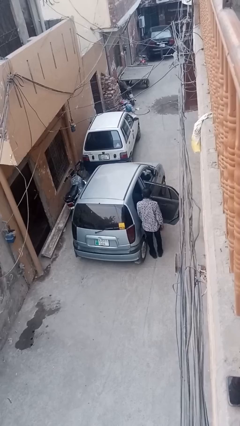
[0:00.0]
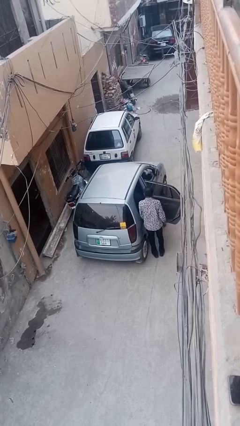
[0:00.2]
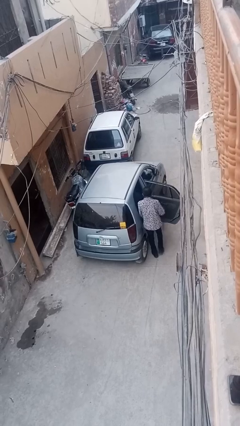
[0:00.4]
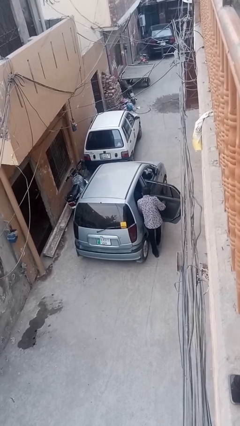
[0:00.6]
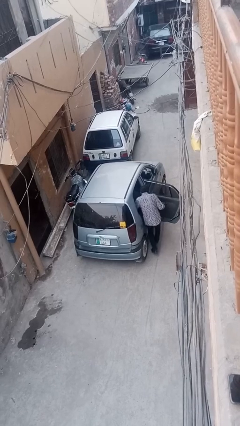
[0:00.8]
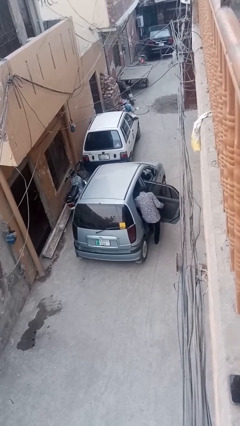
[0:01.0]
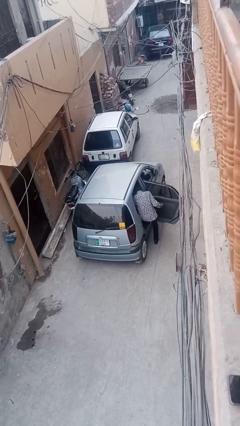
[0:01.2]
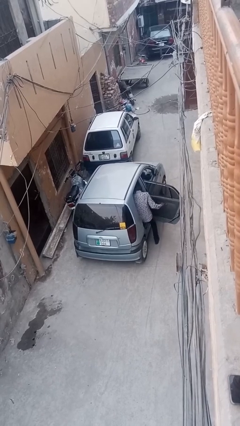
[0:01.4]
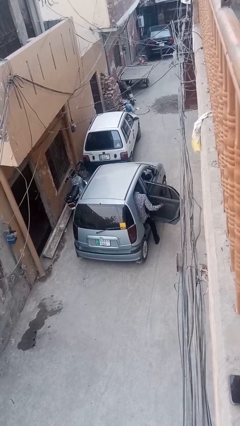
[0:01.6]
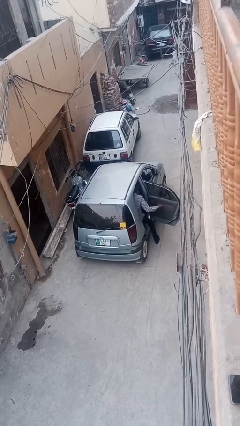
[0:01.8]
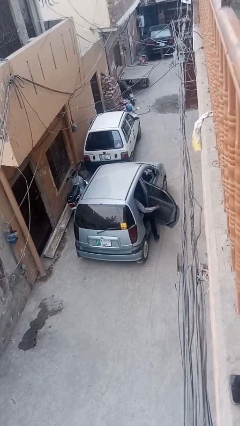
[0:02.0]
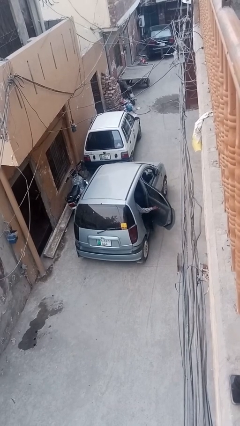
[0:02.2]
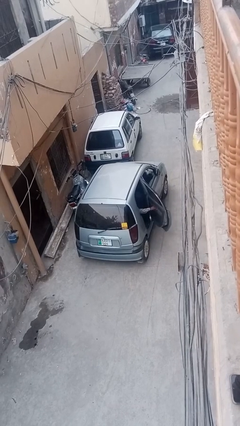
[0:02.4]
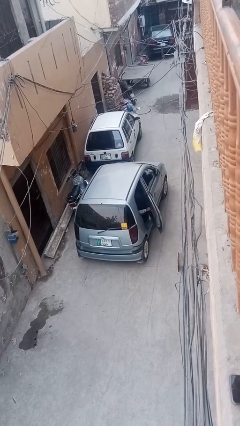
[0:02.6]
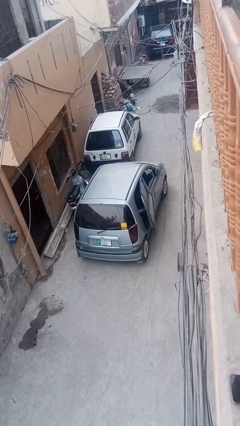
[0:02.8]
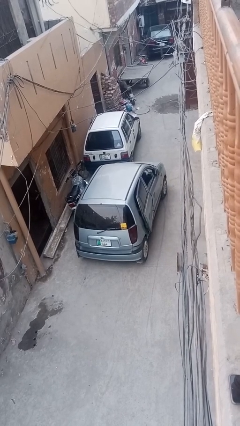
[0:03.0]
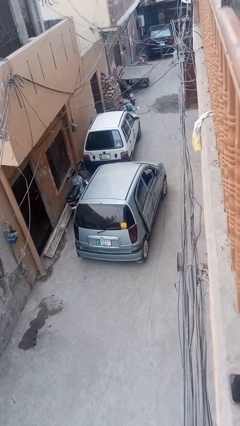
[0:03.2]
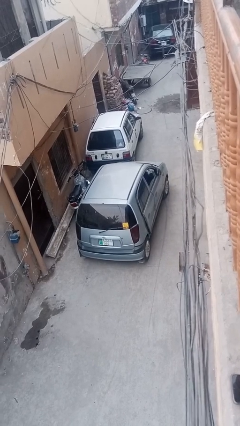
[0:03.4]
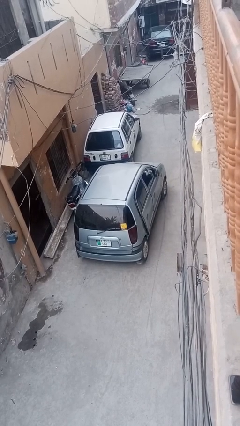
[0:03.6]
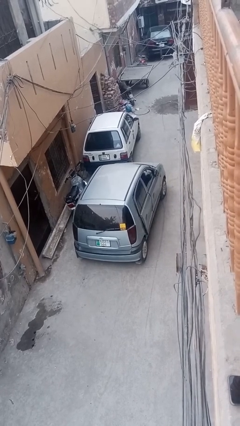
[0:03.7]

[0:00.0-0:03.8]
car picks up person

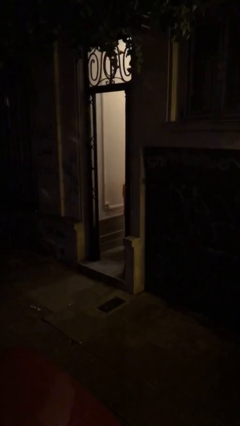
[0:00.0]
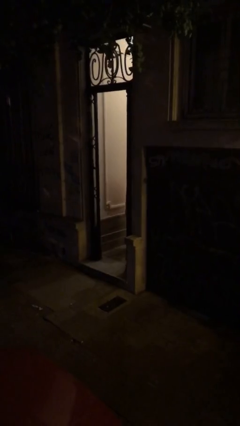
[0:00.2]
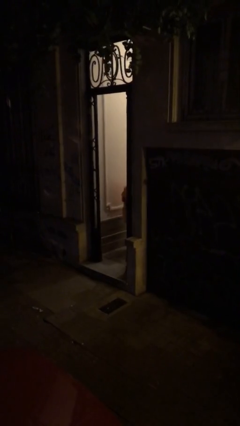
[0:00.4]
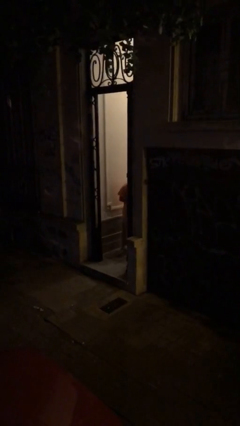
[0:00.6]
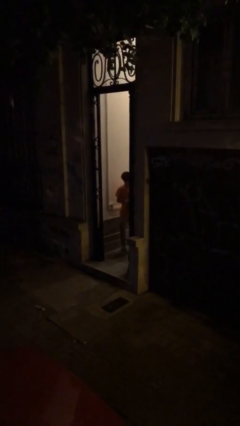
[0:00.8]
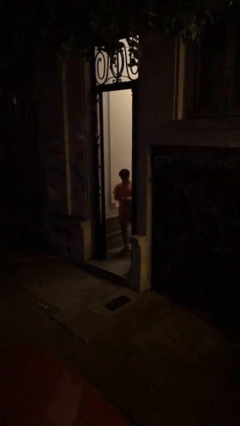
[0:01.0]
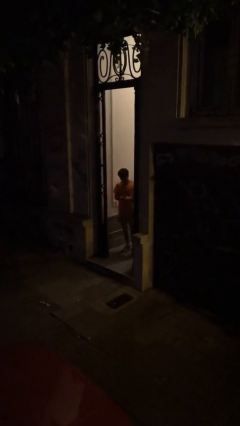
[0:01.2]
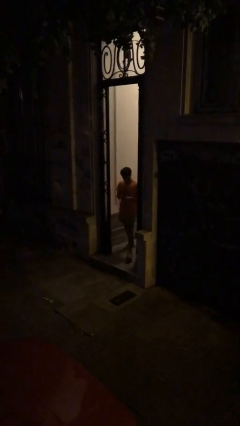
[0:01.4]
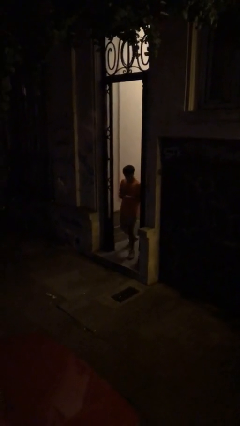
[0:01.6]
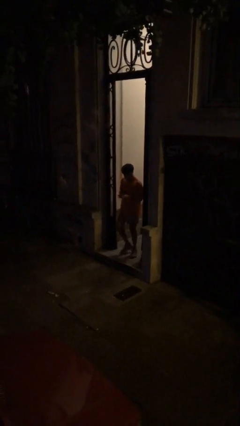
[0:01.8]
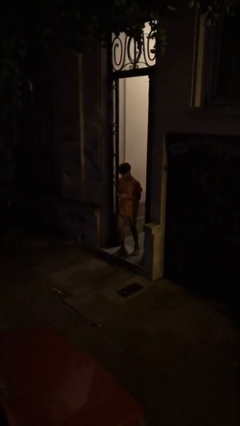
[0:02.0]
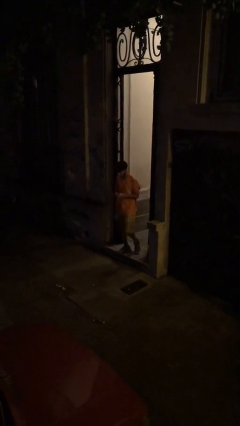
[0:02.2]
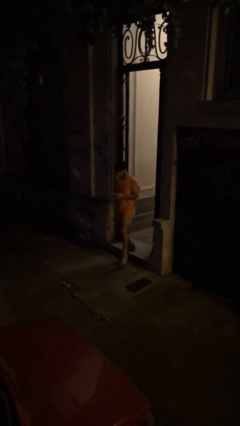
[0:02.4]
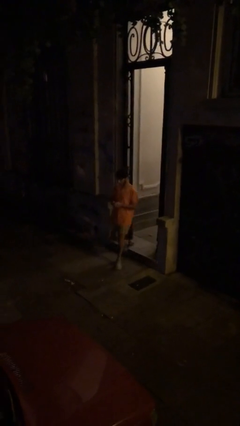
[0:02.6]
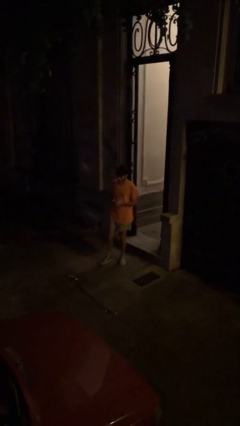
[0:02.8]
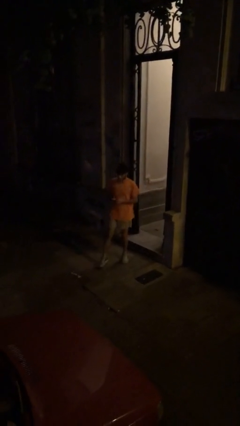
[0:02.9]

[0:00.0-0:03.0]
person enters scene through structure

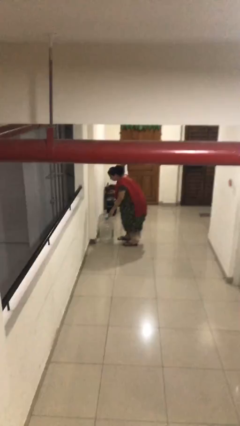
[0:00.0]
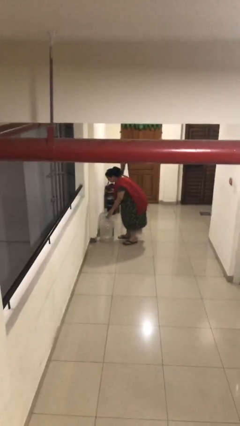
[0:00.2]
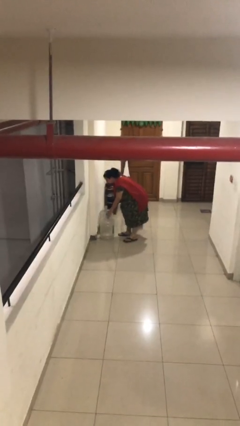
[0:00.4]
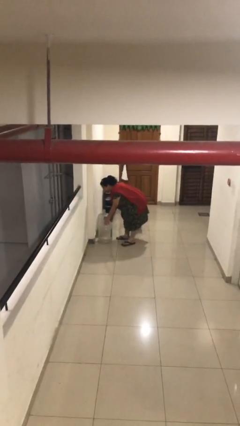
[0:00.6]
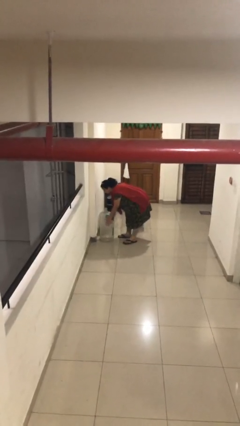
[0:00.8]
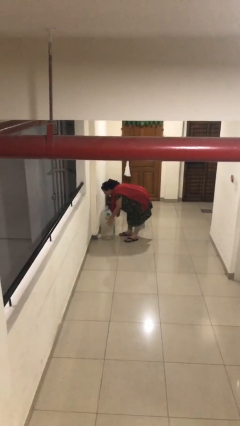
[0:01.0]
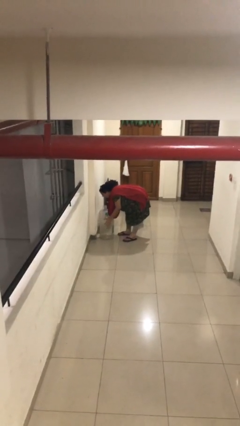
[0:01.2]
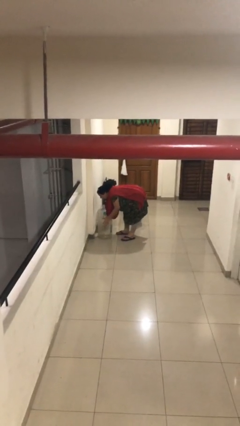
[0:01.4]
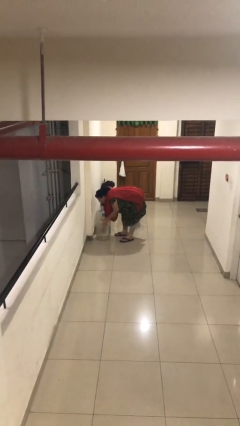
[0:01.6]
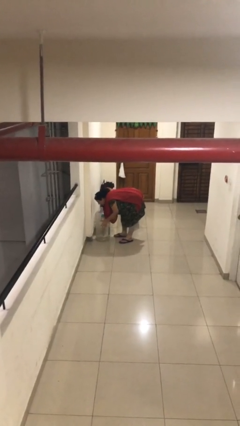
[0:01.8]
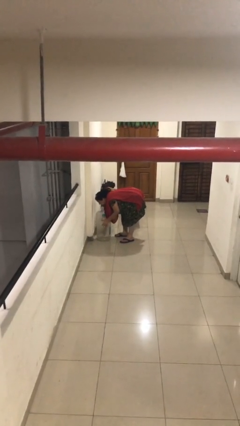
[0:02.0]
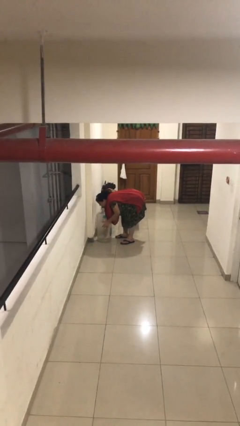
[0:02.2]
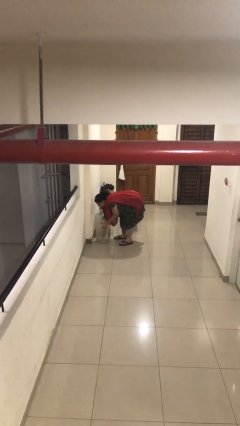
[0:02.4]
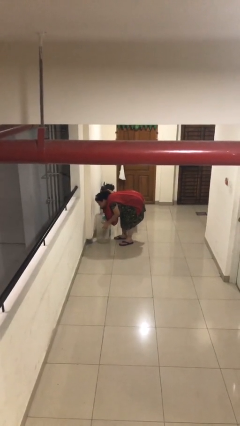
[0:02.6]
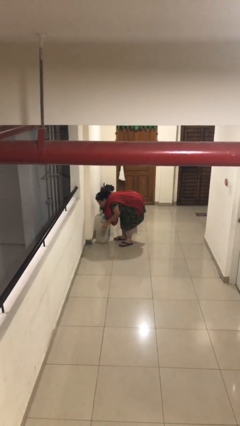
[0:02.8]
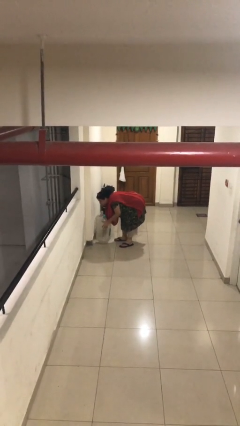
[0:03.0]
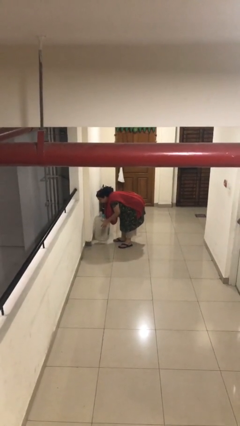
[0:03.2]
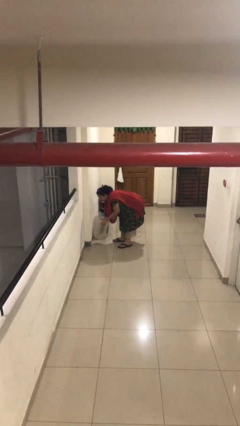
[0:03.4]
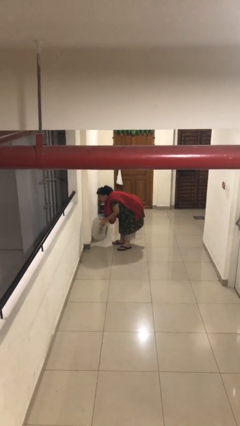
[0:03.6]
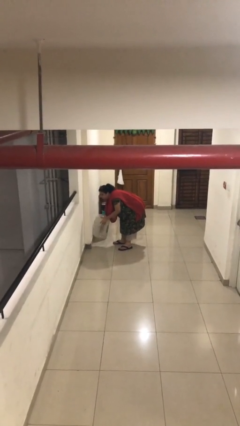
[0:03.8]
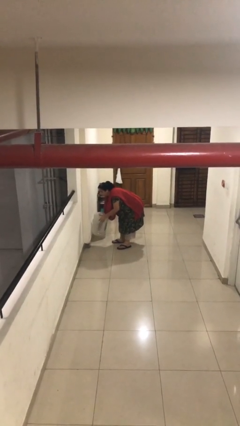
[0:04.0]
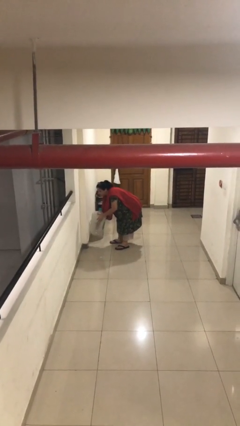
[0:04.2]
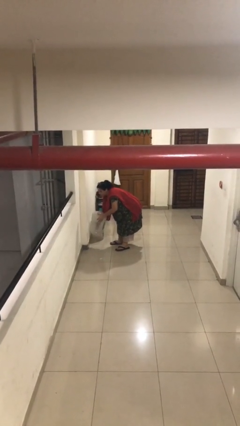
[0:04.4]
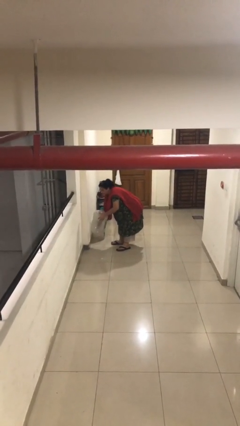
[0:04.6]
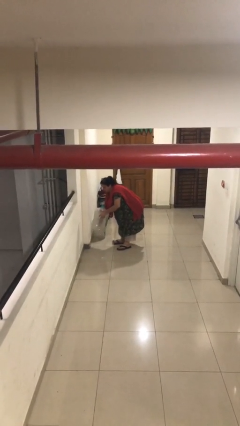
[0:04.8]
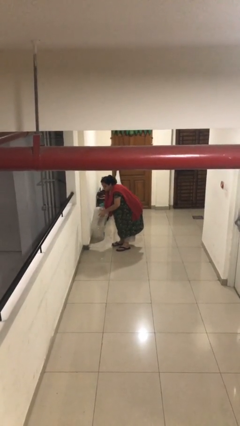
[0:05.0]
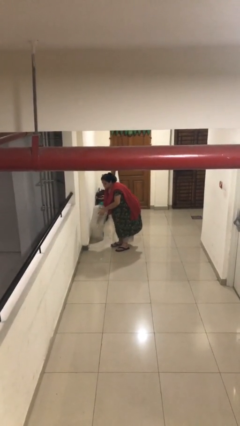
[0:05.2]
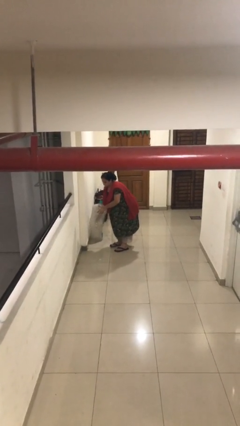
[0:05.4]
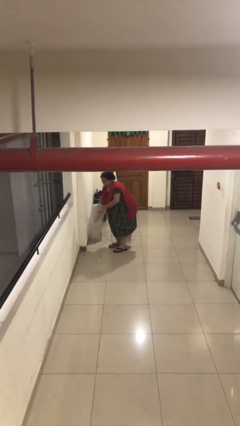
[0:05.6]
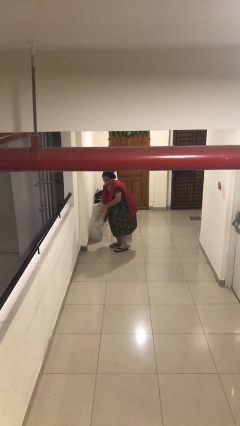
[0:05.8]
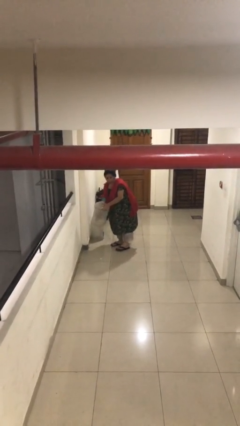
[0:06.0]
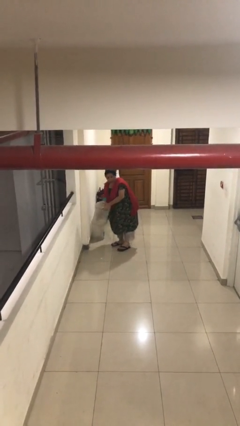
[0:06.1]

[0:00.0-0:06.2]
person picks up object from floor

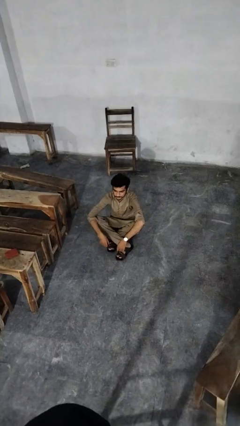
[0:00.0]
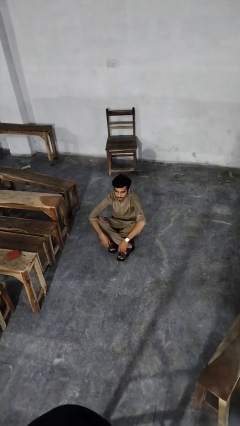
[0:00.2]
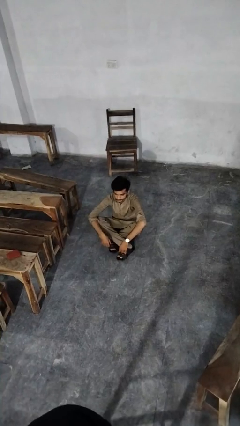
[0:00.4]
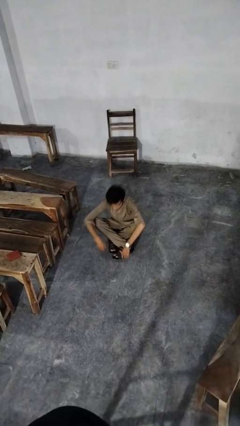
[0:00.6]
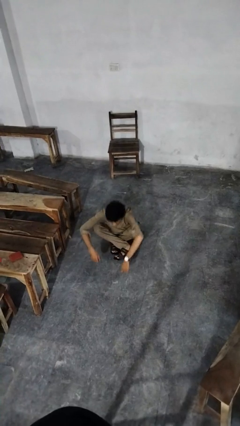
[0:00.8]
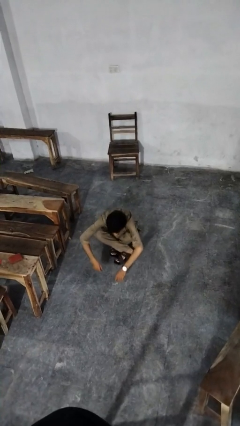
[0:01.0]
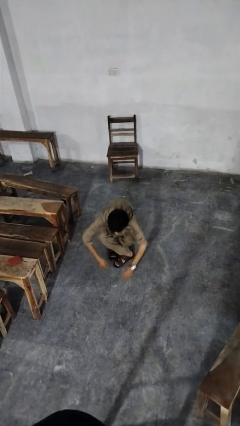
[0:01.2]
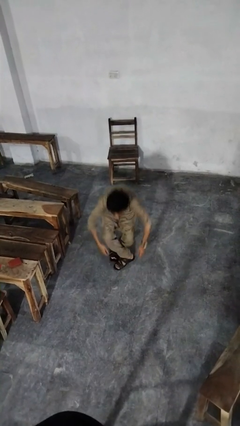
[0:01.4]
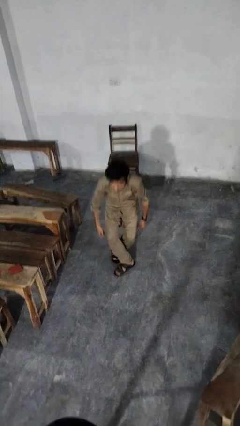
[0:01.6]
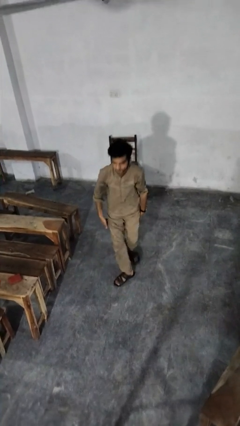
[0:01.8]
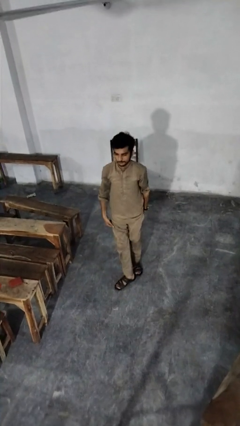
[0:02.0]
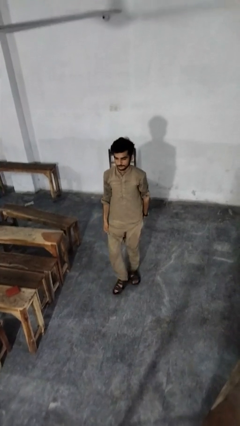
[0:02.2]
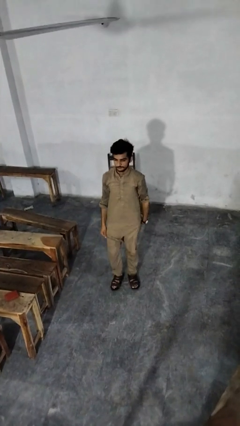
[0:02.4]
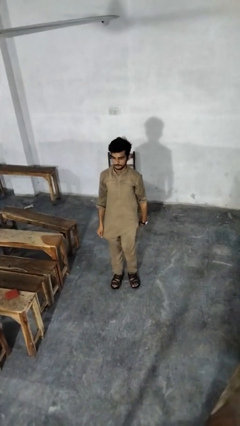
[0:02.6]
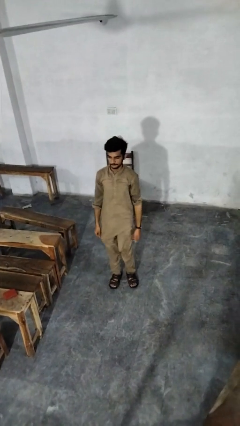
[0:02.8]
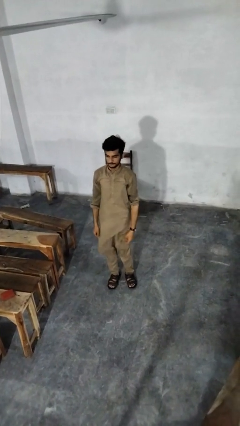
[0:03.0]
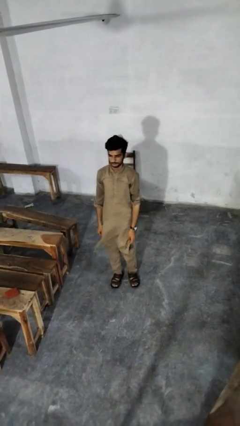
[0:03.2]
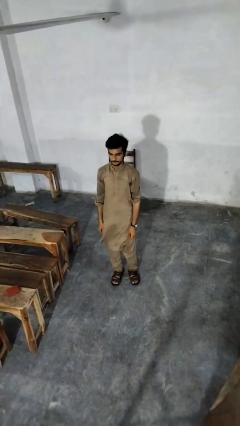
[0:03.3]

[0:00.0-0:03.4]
person stands up from floor

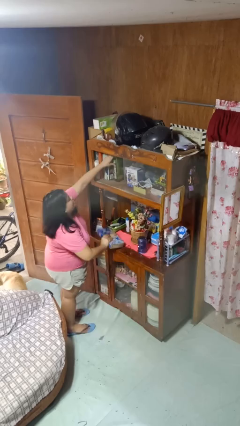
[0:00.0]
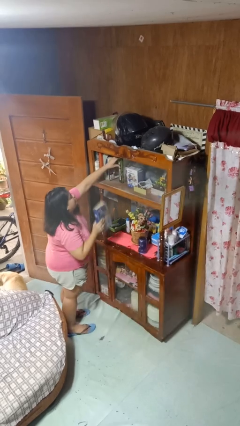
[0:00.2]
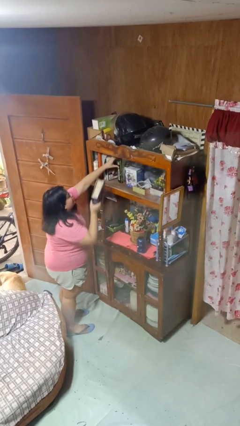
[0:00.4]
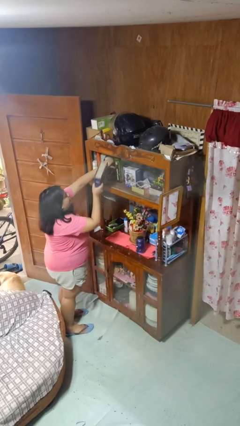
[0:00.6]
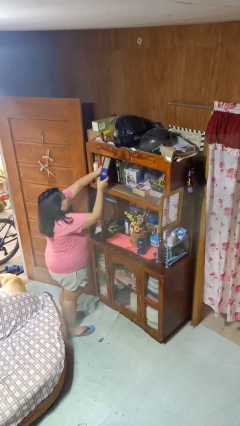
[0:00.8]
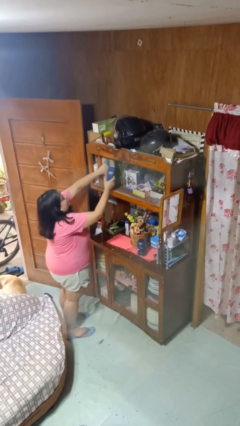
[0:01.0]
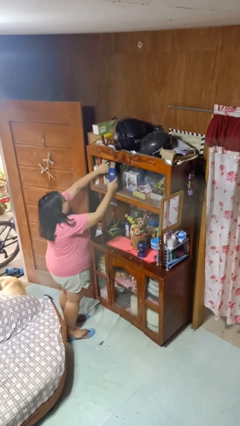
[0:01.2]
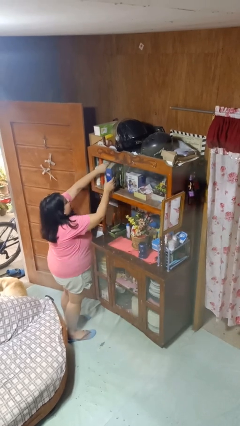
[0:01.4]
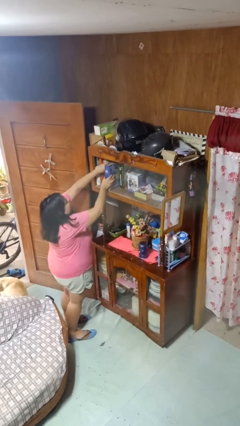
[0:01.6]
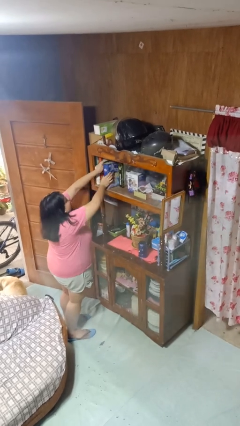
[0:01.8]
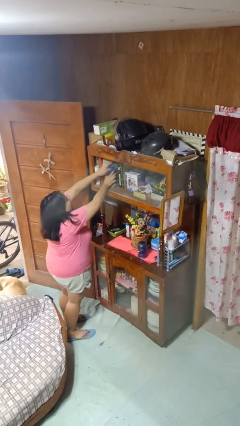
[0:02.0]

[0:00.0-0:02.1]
person puts down object on shelf
